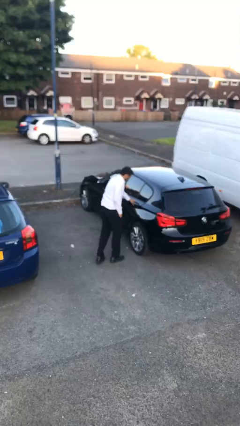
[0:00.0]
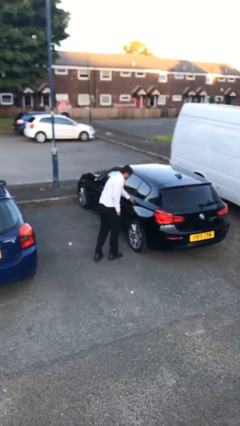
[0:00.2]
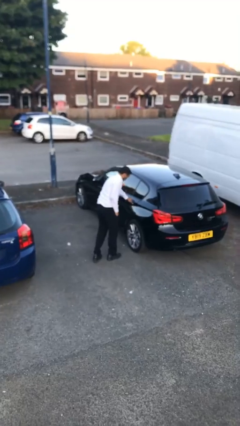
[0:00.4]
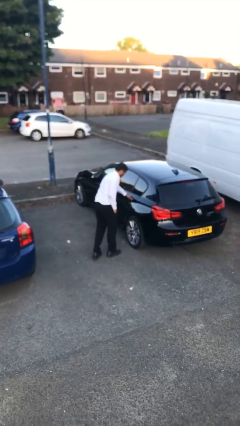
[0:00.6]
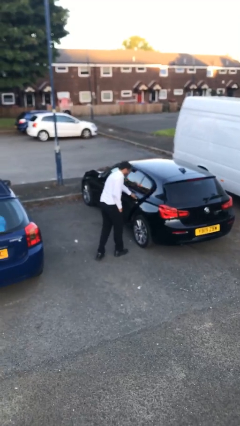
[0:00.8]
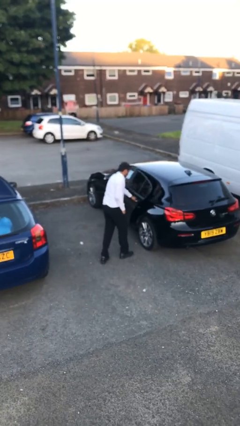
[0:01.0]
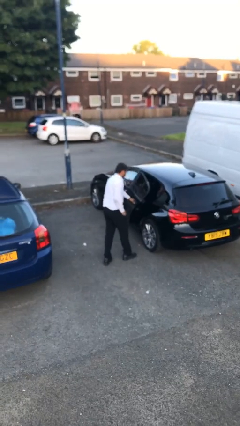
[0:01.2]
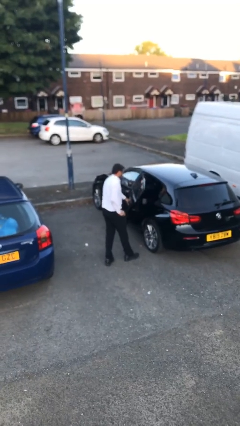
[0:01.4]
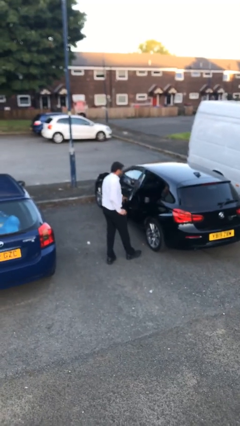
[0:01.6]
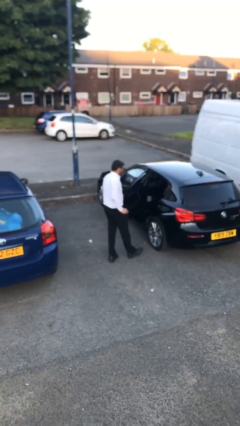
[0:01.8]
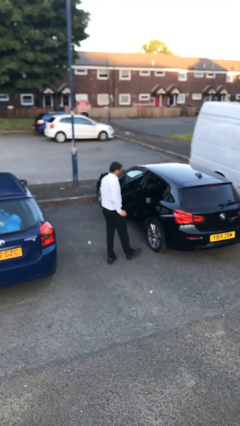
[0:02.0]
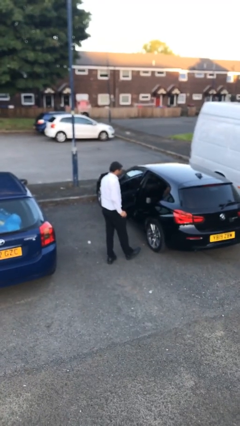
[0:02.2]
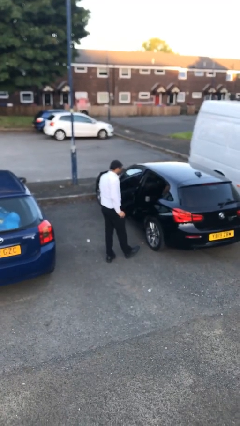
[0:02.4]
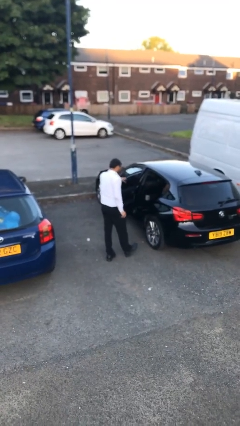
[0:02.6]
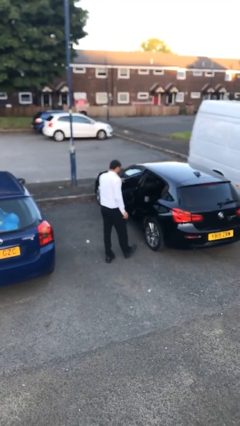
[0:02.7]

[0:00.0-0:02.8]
person opens car door

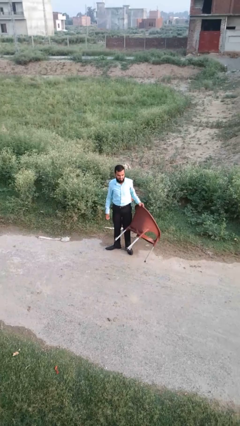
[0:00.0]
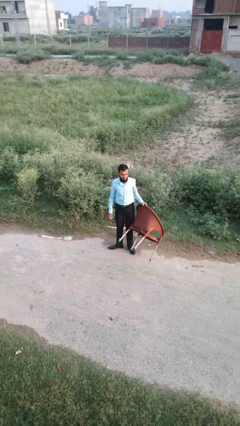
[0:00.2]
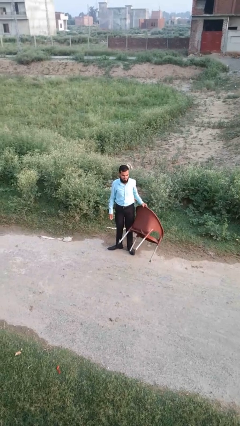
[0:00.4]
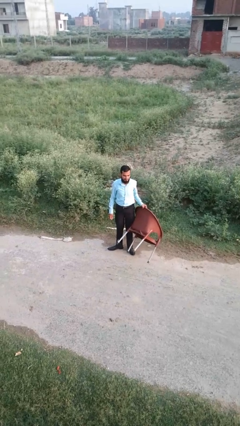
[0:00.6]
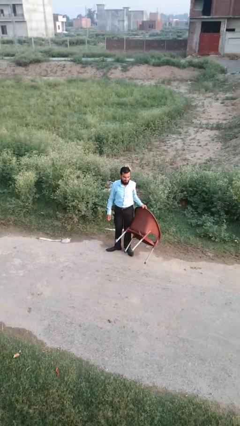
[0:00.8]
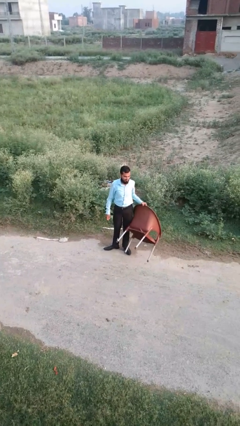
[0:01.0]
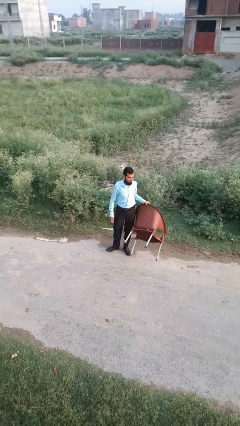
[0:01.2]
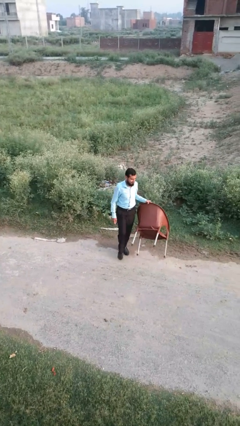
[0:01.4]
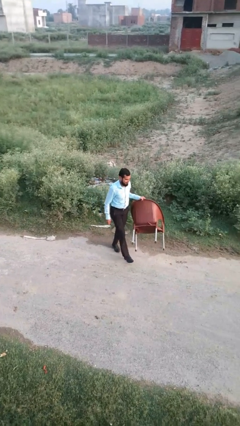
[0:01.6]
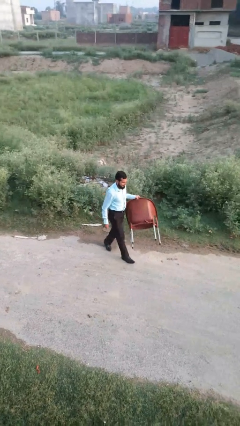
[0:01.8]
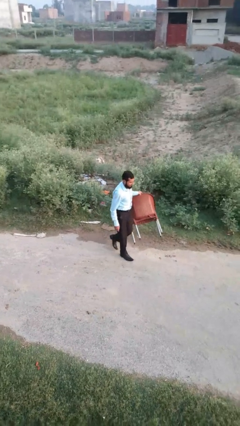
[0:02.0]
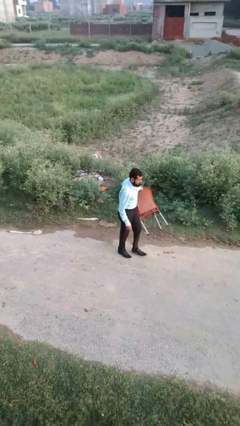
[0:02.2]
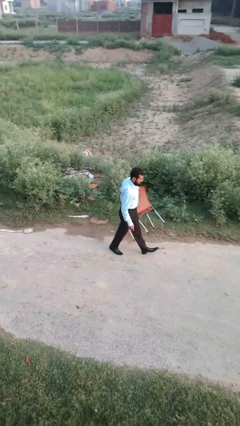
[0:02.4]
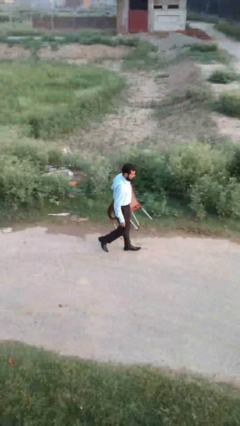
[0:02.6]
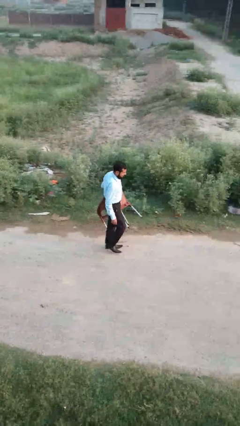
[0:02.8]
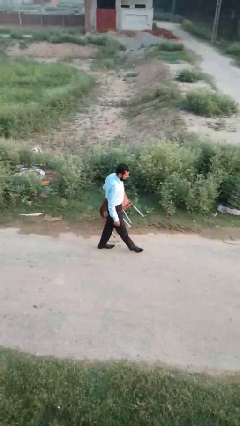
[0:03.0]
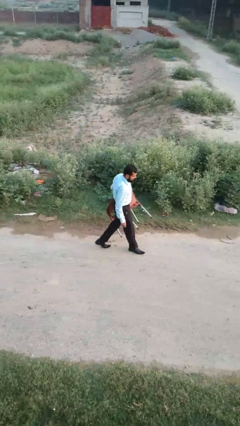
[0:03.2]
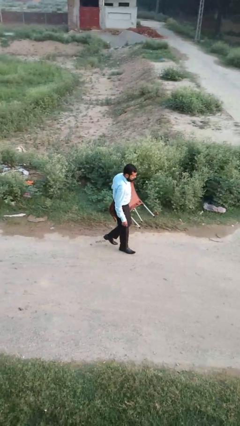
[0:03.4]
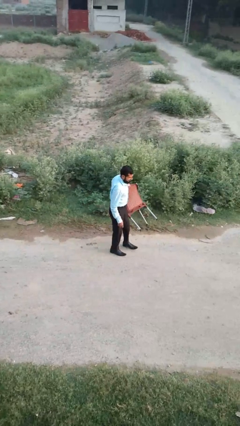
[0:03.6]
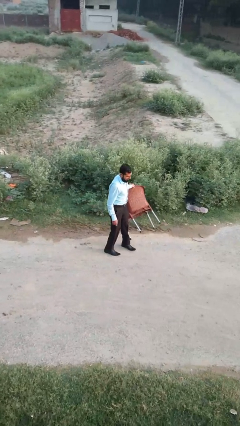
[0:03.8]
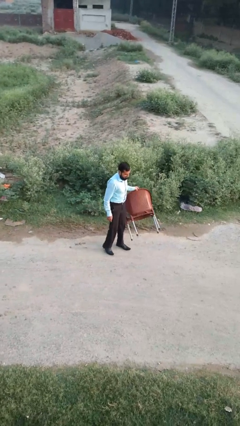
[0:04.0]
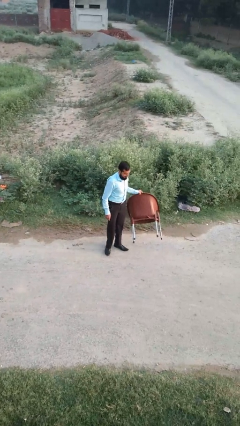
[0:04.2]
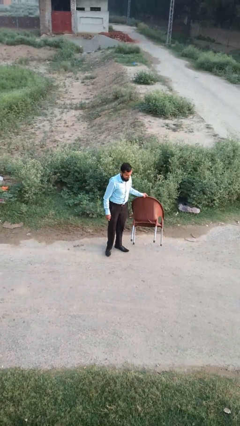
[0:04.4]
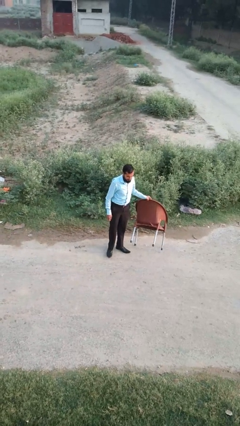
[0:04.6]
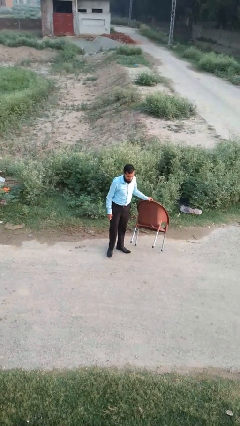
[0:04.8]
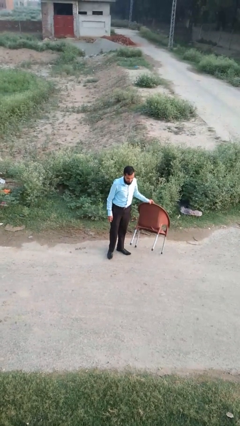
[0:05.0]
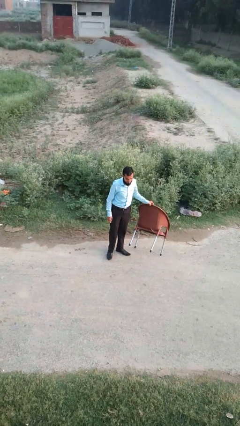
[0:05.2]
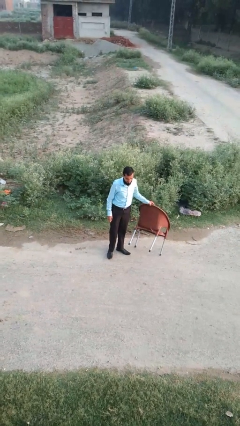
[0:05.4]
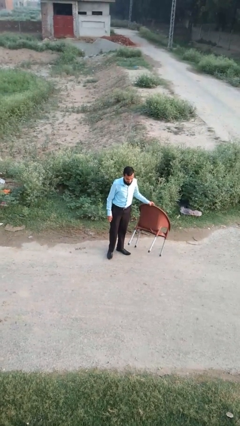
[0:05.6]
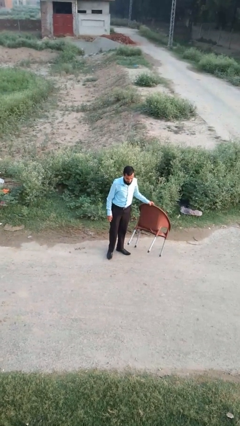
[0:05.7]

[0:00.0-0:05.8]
person carries furniture

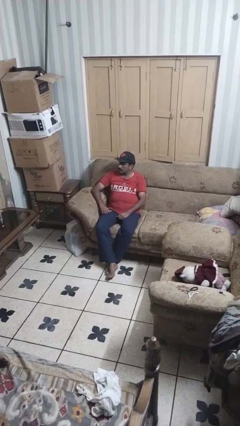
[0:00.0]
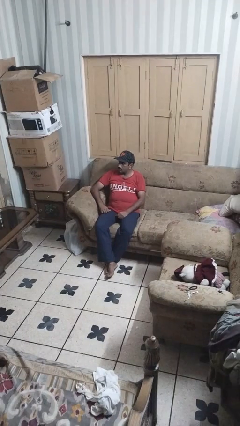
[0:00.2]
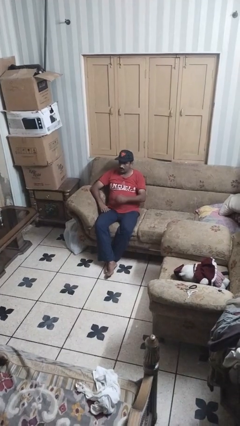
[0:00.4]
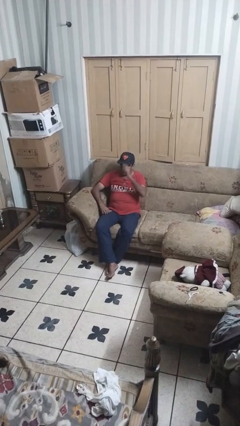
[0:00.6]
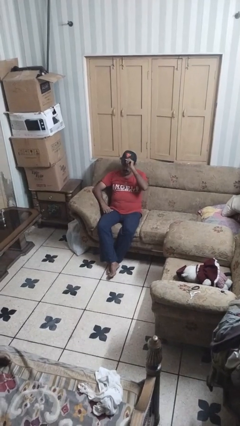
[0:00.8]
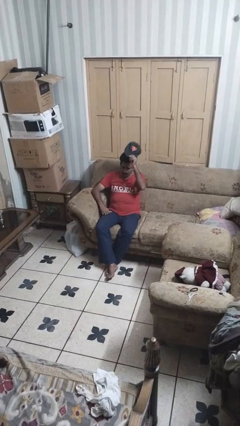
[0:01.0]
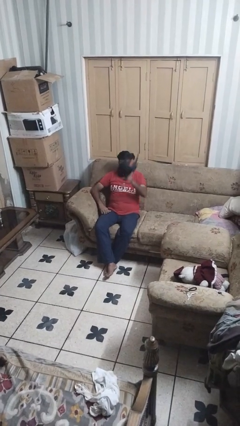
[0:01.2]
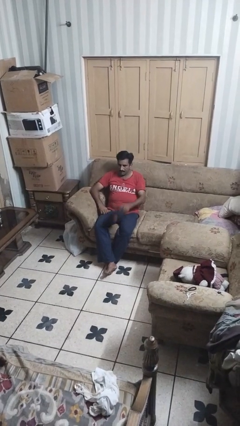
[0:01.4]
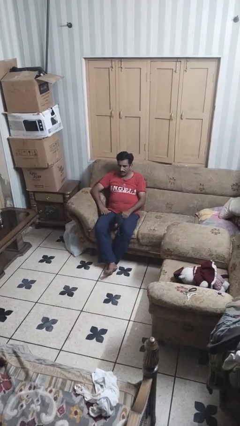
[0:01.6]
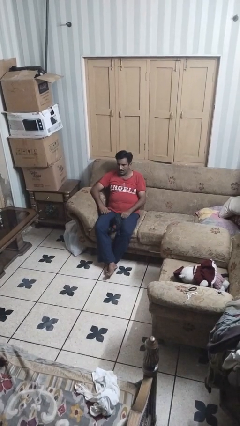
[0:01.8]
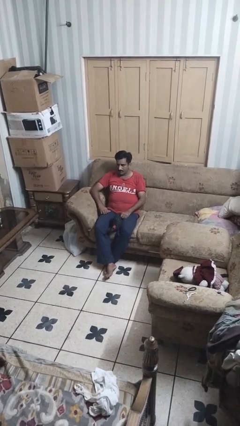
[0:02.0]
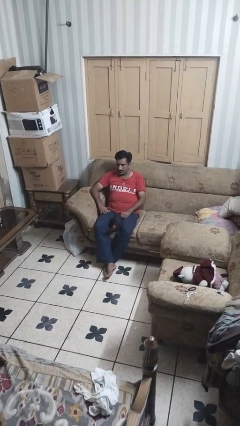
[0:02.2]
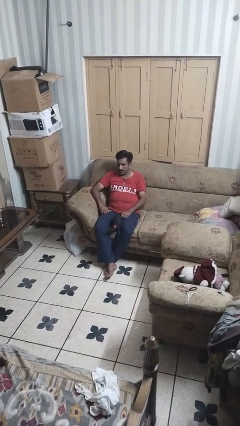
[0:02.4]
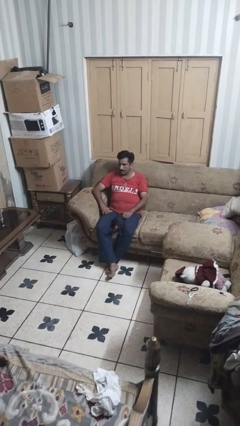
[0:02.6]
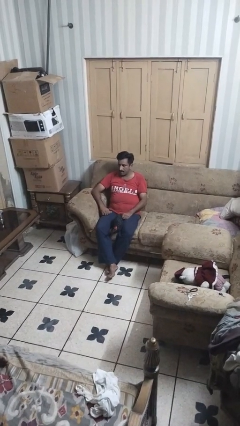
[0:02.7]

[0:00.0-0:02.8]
person takes off hat

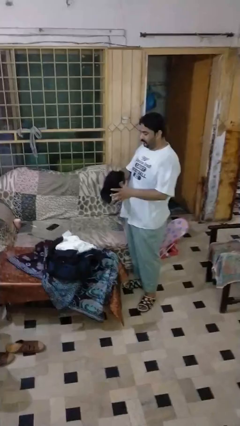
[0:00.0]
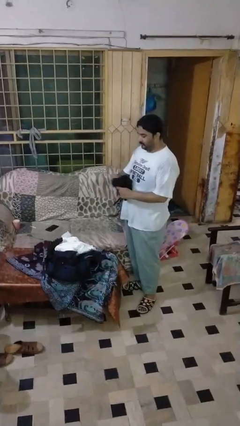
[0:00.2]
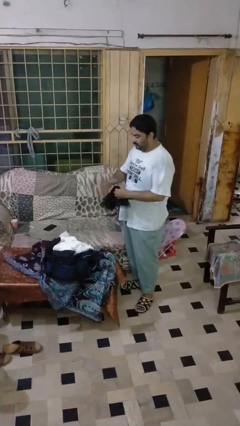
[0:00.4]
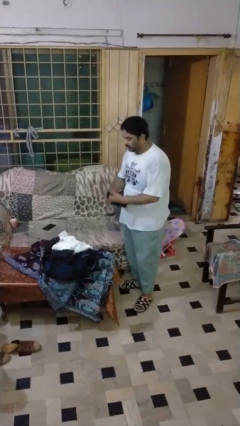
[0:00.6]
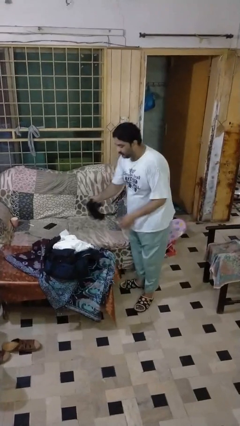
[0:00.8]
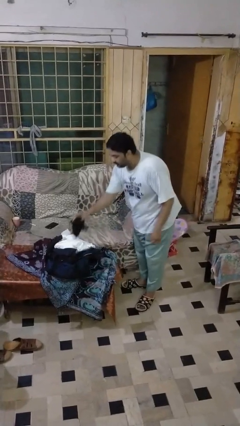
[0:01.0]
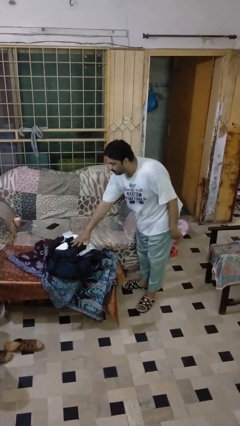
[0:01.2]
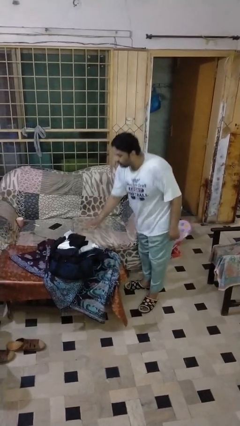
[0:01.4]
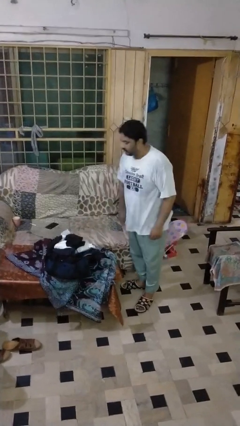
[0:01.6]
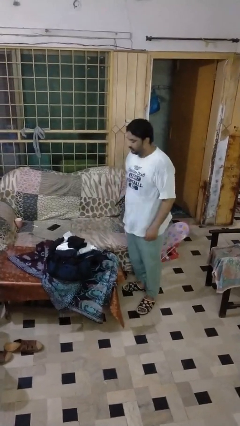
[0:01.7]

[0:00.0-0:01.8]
person folds shirt

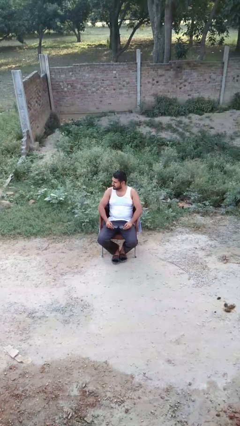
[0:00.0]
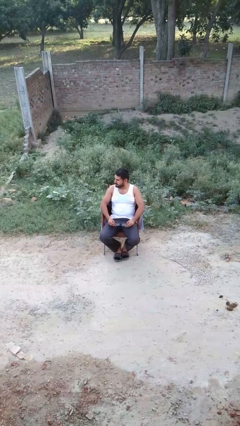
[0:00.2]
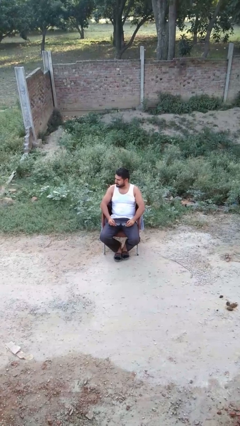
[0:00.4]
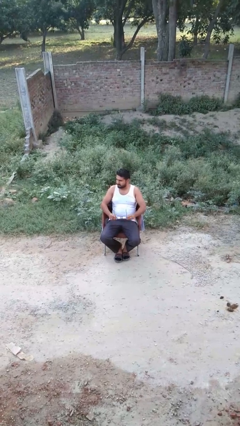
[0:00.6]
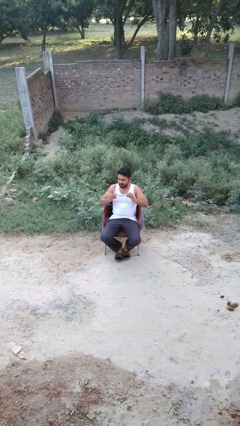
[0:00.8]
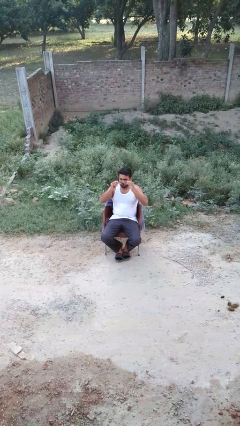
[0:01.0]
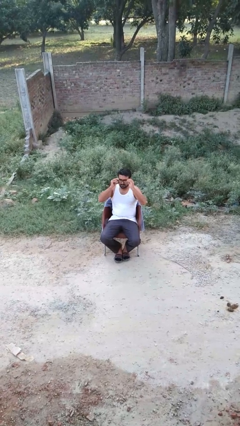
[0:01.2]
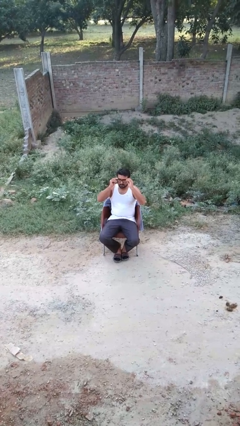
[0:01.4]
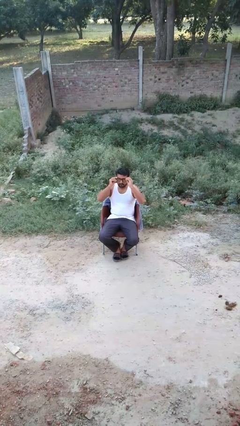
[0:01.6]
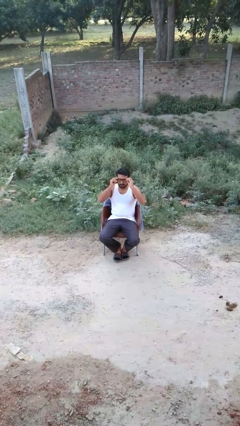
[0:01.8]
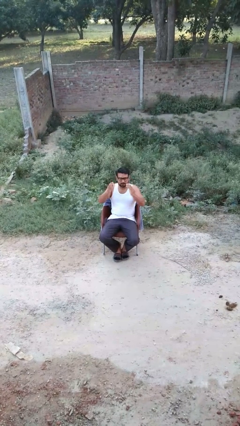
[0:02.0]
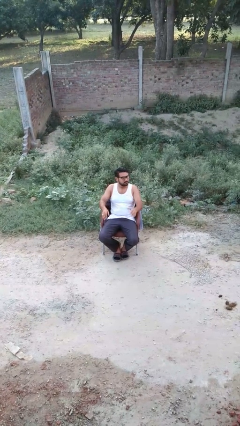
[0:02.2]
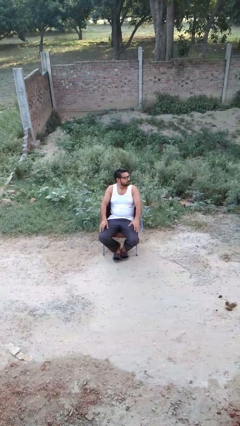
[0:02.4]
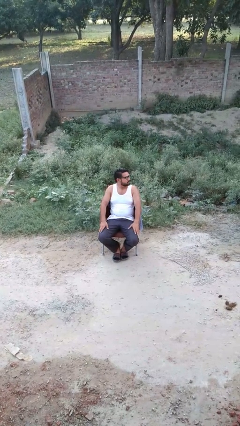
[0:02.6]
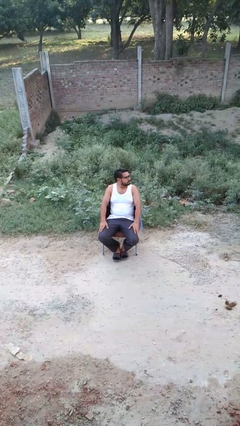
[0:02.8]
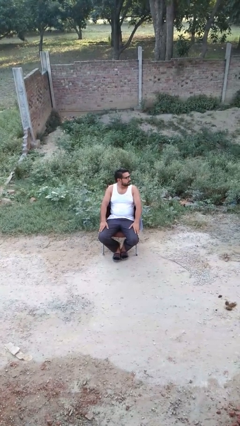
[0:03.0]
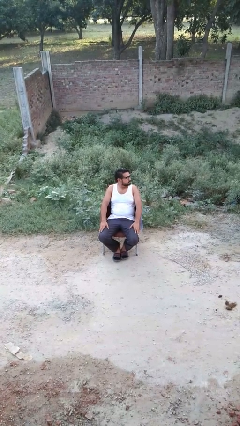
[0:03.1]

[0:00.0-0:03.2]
person puts on glasses

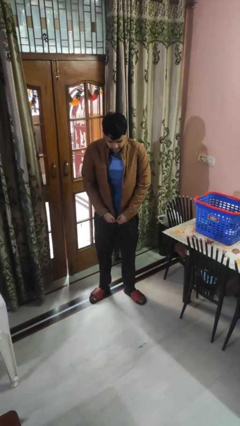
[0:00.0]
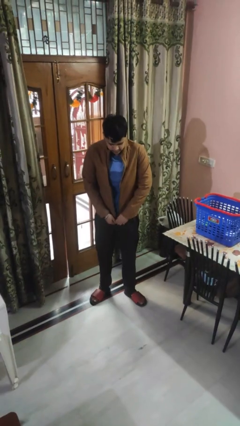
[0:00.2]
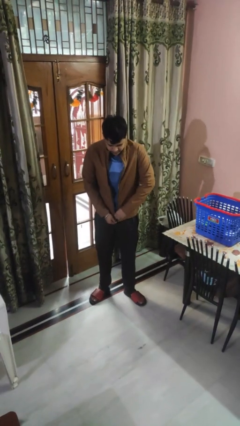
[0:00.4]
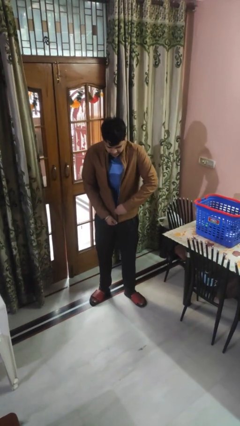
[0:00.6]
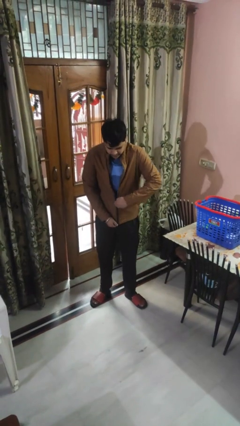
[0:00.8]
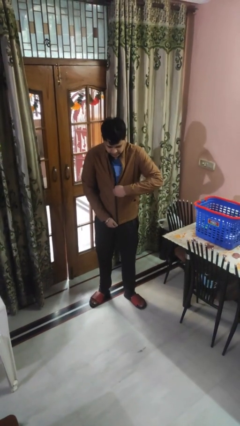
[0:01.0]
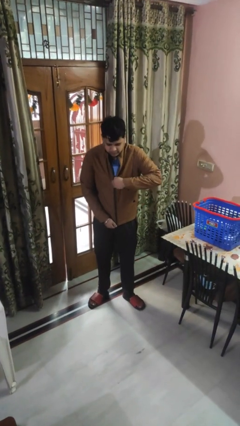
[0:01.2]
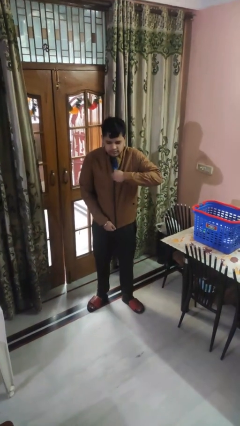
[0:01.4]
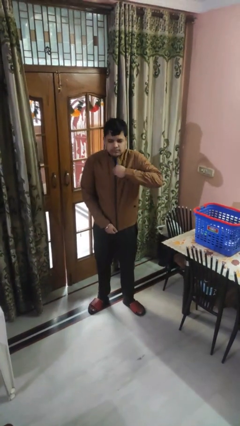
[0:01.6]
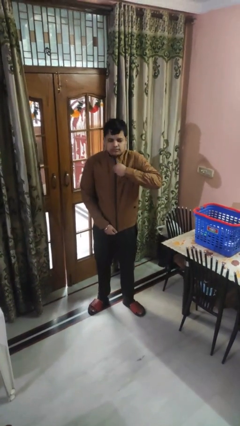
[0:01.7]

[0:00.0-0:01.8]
person zips up jacket
